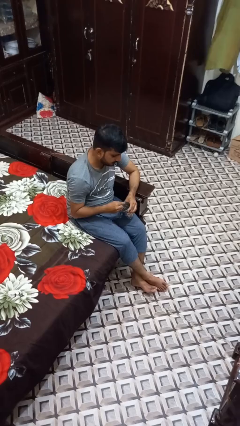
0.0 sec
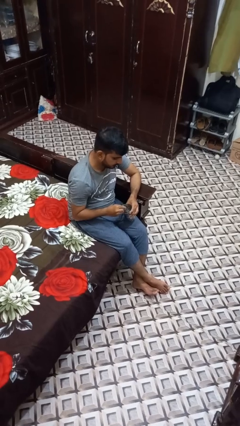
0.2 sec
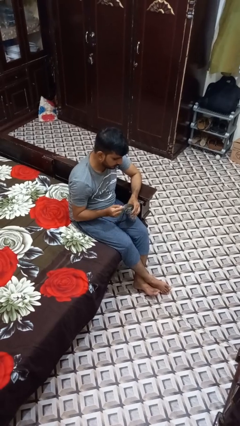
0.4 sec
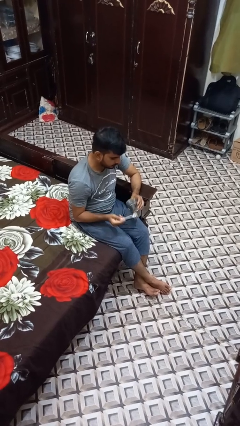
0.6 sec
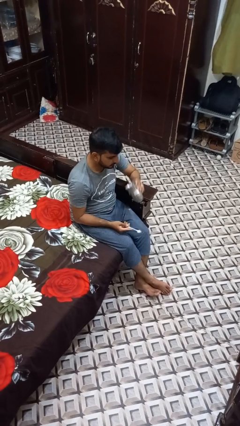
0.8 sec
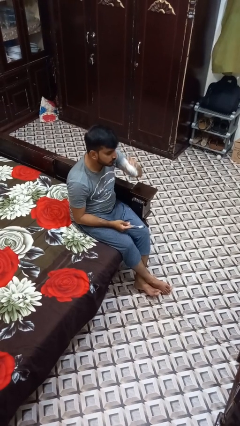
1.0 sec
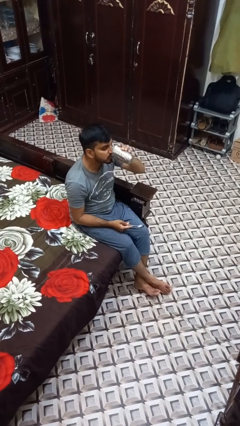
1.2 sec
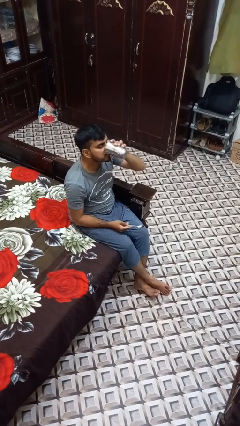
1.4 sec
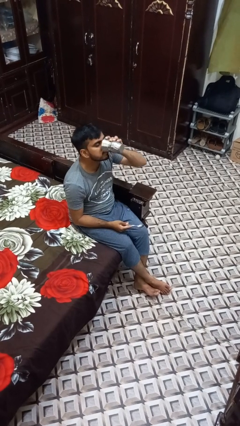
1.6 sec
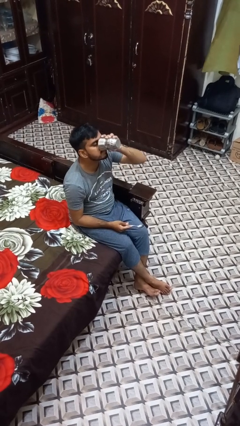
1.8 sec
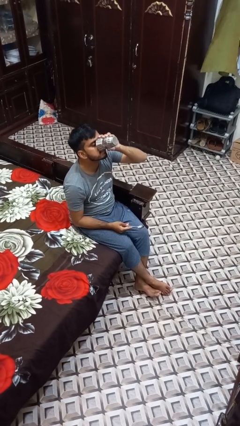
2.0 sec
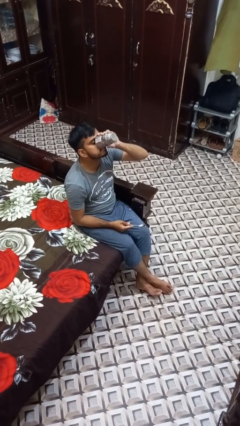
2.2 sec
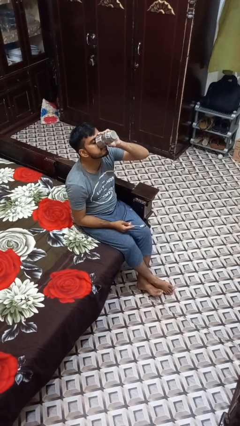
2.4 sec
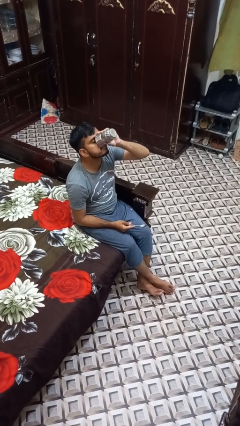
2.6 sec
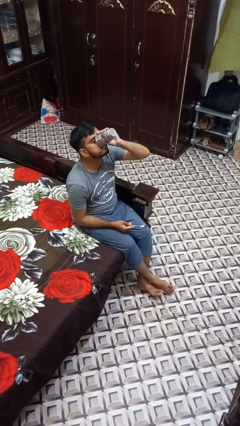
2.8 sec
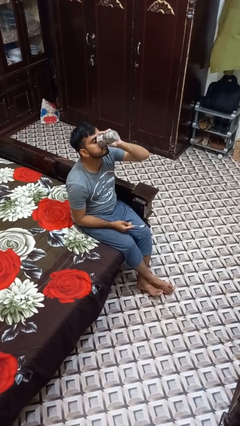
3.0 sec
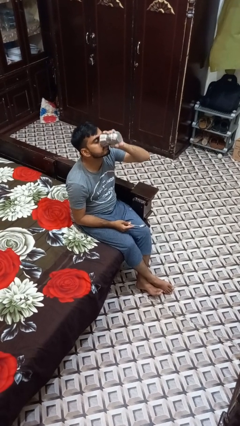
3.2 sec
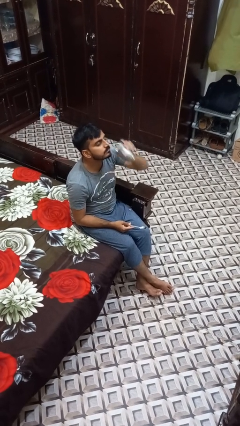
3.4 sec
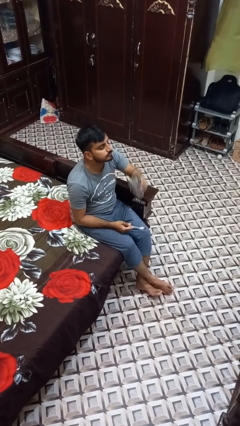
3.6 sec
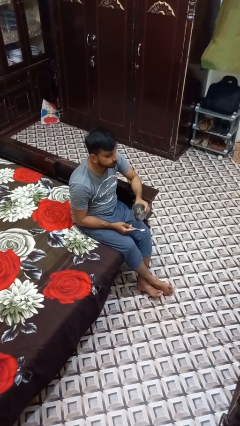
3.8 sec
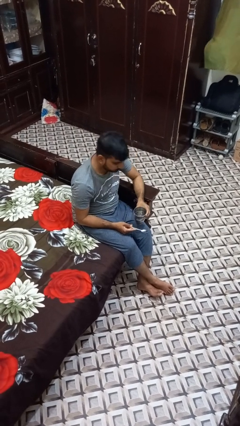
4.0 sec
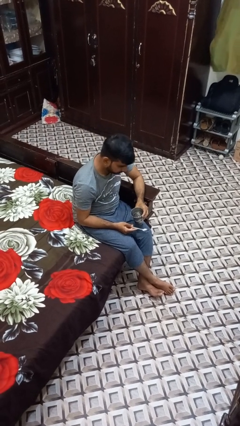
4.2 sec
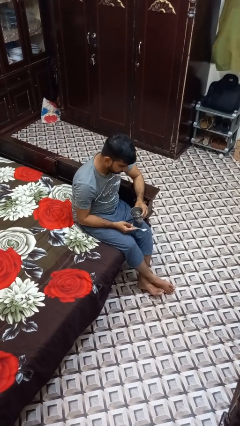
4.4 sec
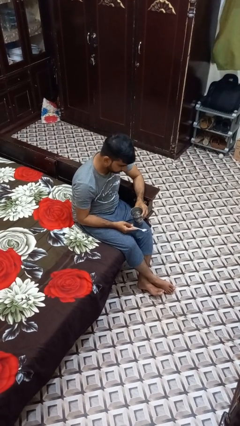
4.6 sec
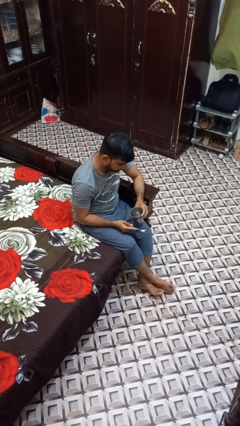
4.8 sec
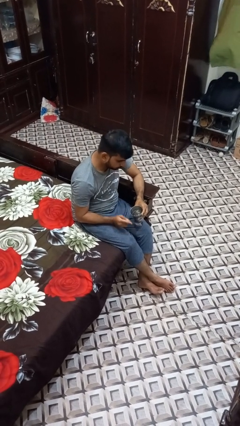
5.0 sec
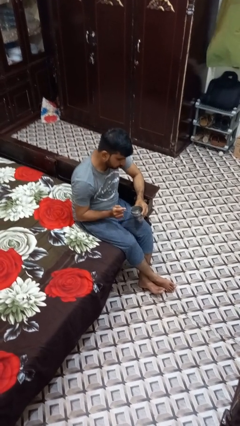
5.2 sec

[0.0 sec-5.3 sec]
person drinks from mug

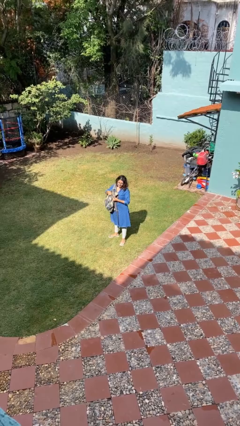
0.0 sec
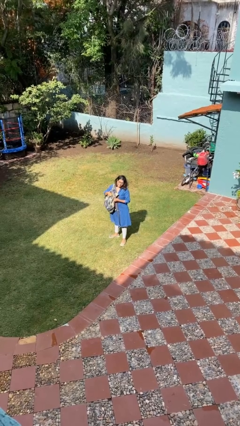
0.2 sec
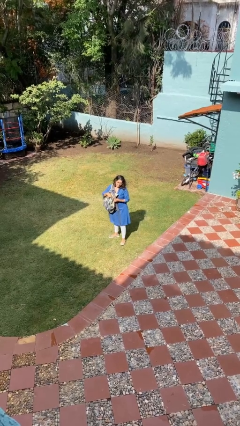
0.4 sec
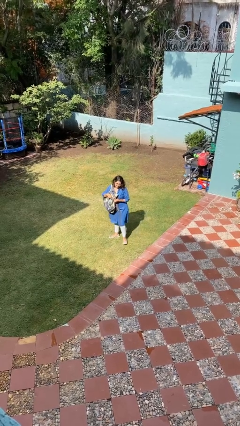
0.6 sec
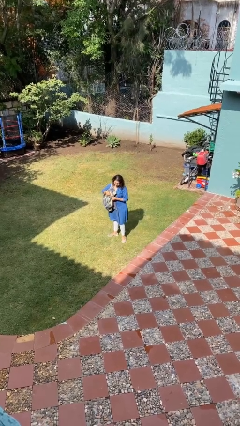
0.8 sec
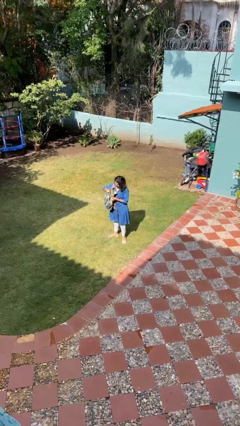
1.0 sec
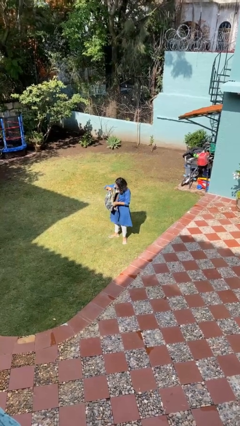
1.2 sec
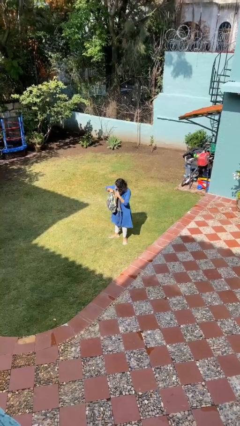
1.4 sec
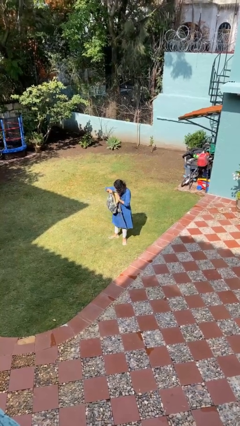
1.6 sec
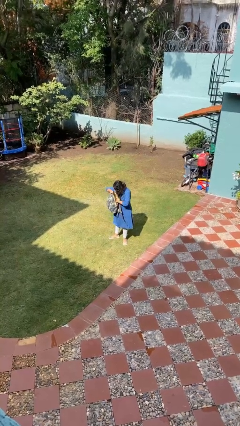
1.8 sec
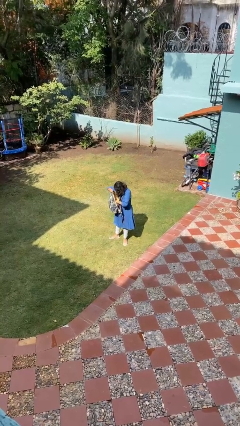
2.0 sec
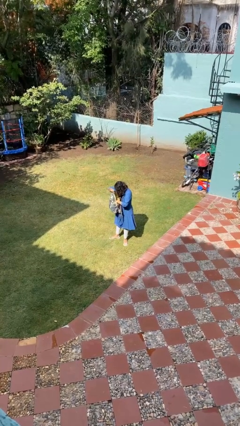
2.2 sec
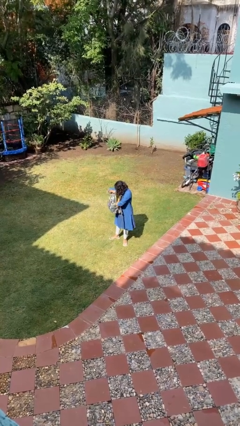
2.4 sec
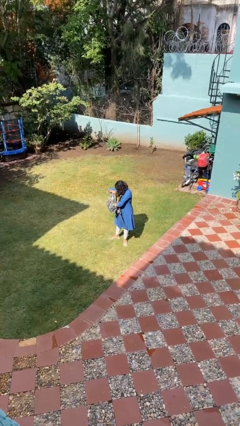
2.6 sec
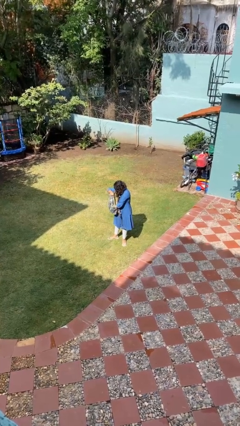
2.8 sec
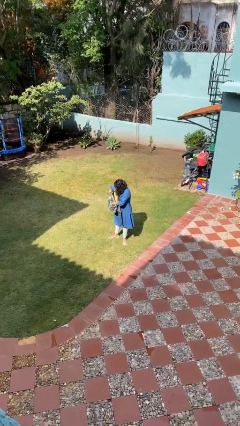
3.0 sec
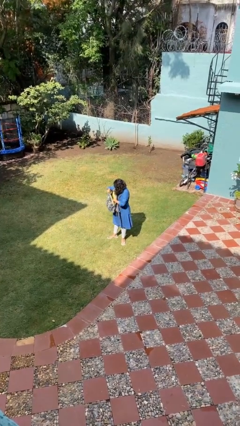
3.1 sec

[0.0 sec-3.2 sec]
person searches in backpack

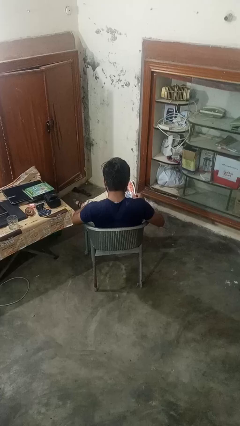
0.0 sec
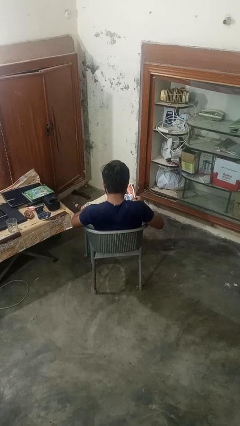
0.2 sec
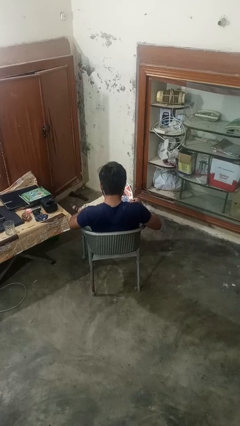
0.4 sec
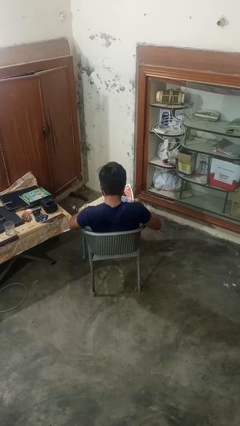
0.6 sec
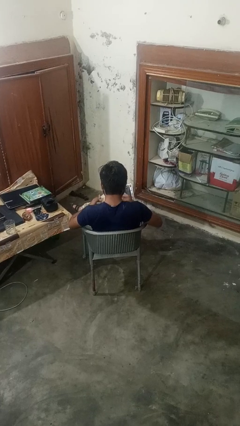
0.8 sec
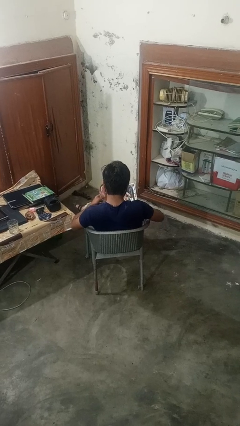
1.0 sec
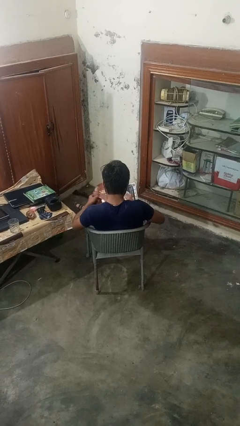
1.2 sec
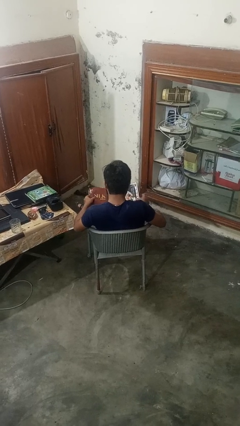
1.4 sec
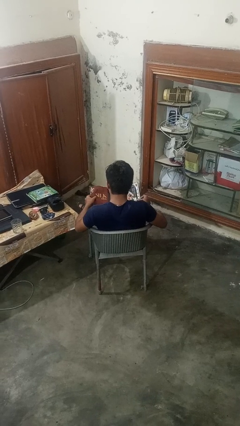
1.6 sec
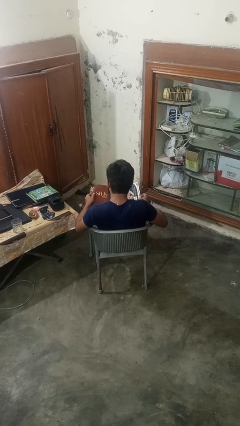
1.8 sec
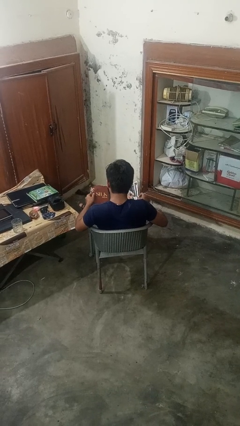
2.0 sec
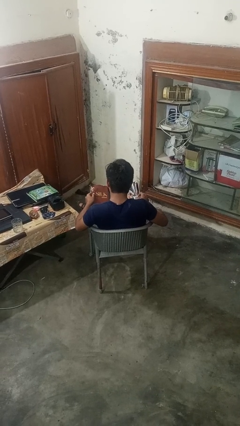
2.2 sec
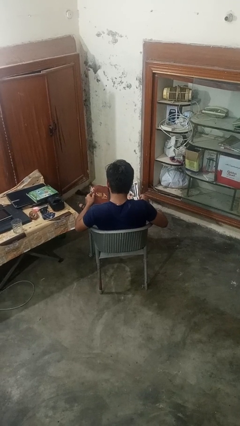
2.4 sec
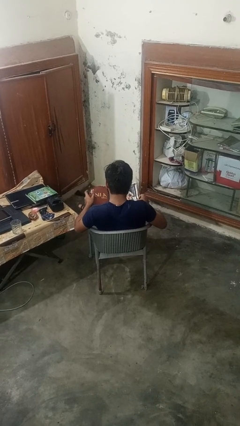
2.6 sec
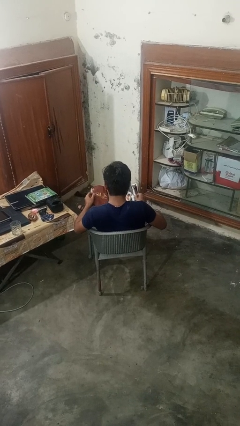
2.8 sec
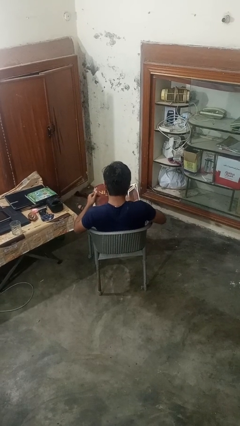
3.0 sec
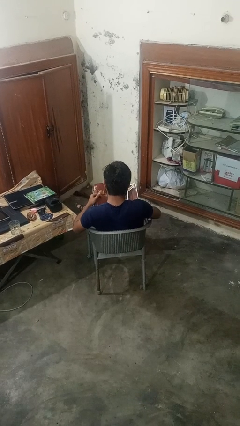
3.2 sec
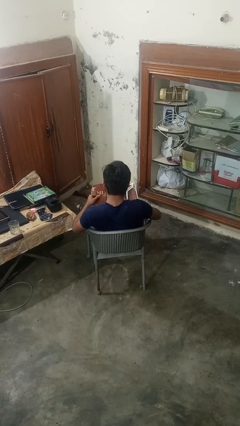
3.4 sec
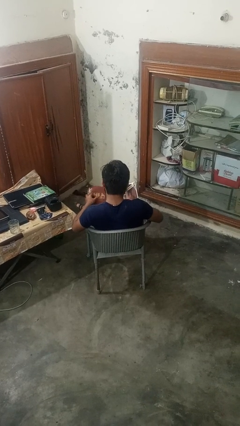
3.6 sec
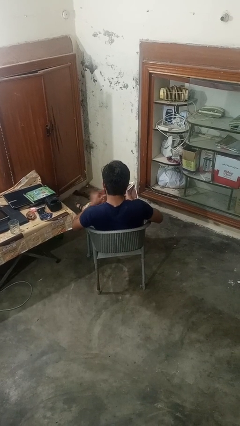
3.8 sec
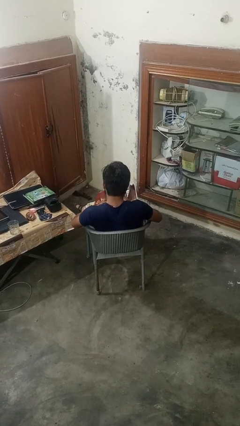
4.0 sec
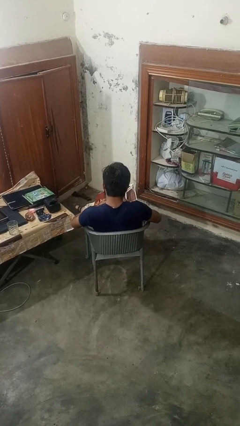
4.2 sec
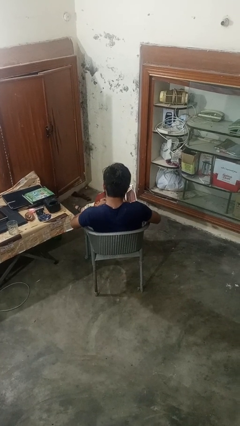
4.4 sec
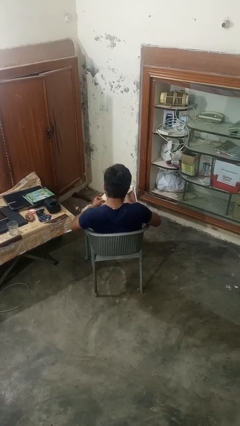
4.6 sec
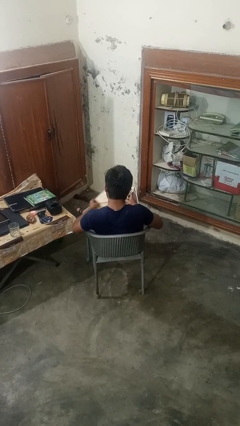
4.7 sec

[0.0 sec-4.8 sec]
person reads magazine

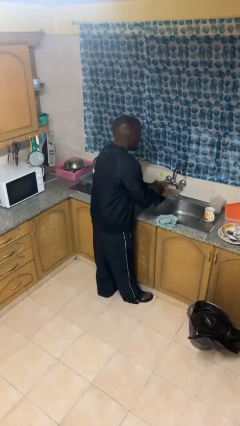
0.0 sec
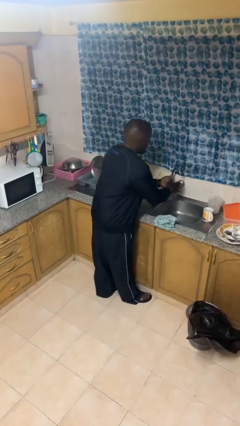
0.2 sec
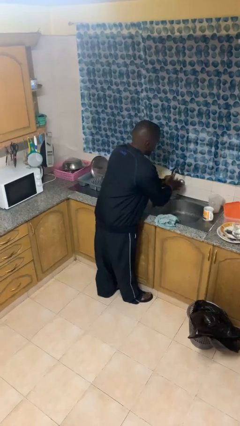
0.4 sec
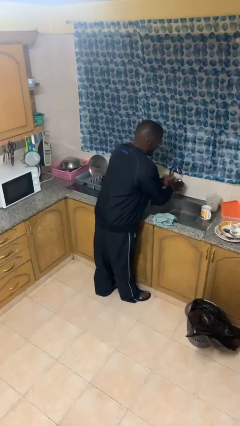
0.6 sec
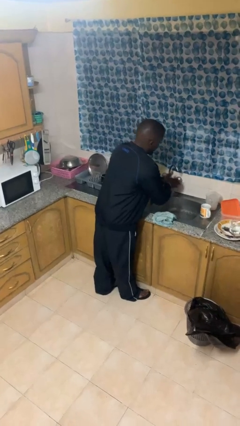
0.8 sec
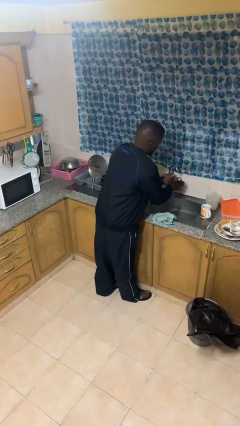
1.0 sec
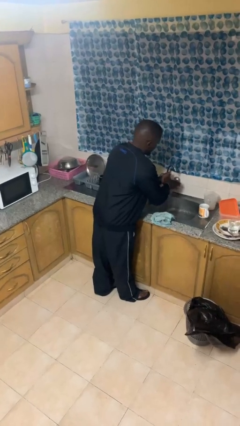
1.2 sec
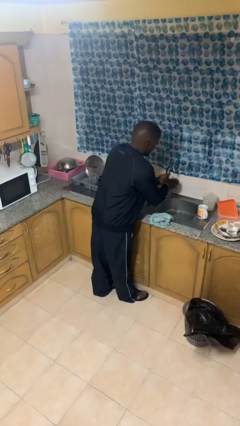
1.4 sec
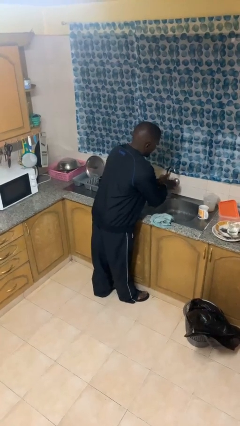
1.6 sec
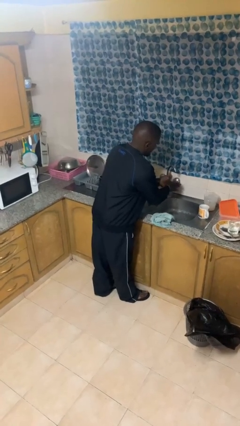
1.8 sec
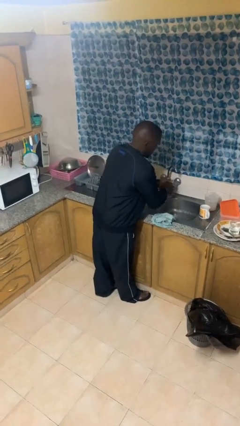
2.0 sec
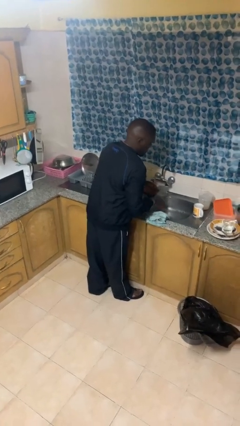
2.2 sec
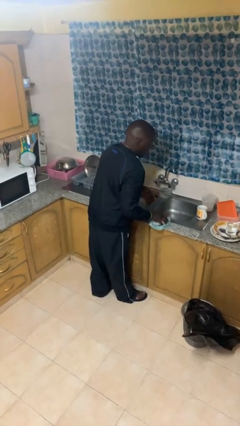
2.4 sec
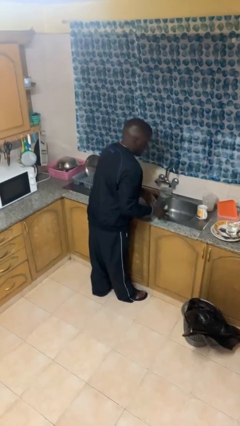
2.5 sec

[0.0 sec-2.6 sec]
person washes hands

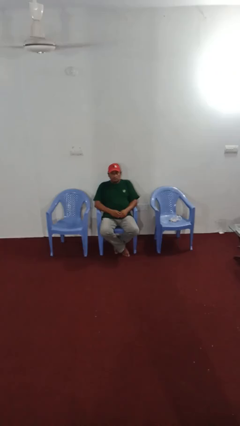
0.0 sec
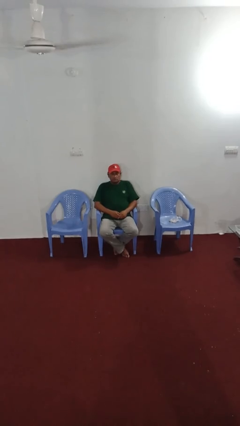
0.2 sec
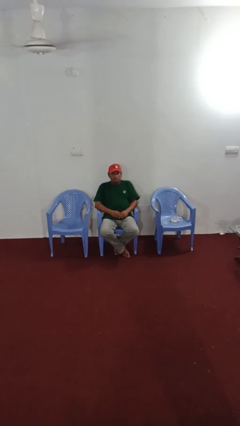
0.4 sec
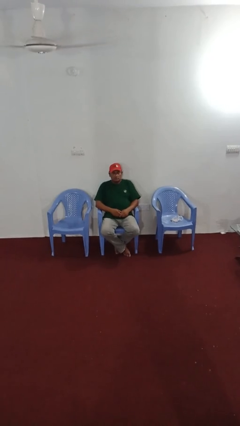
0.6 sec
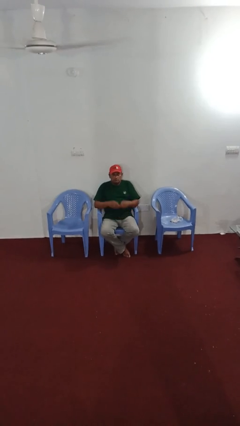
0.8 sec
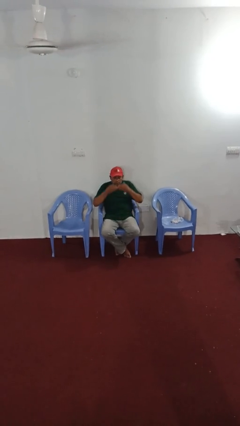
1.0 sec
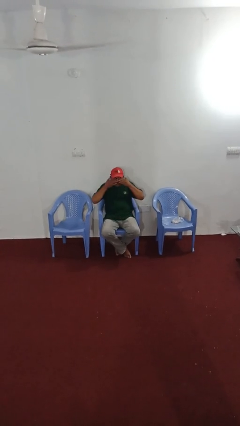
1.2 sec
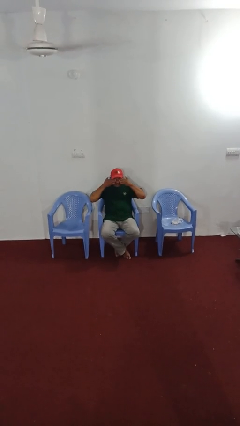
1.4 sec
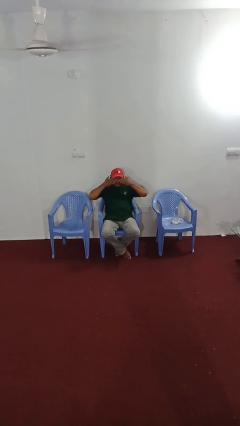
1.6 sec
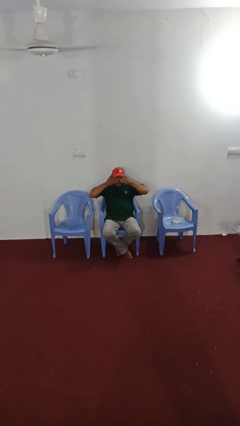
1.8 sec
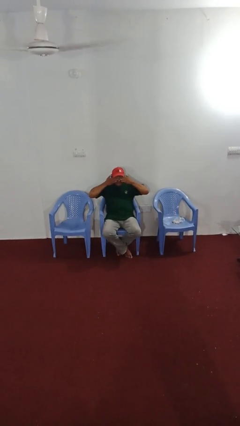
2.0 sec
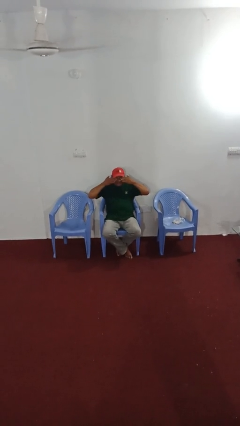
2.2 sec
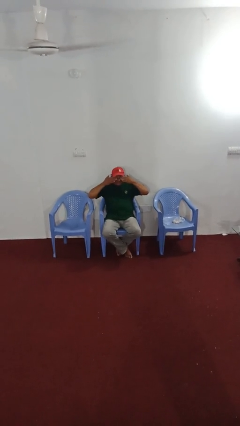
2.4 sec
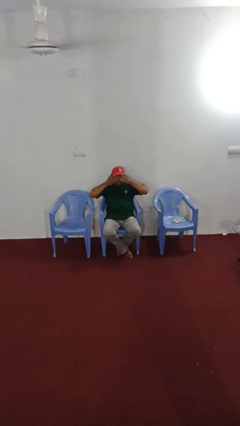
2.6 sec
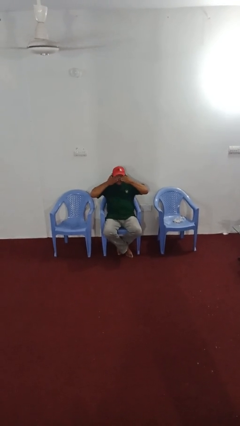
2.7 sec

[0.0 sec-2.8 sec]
person rubs eyes
